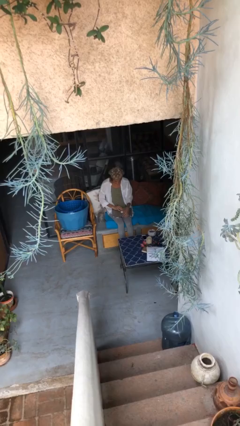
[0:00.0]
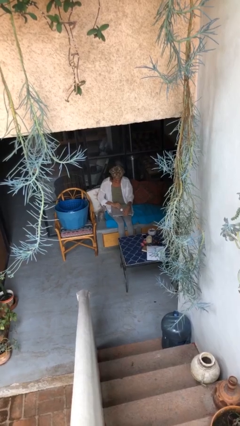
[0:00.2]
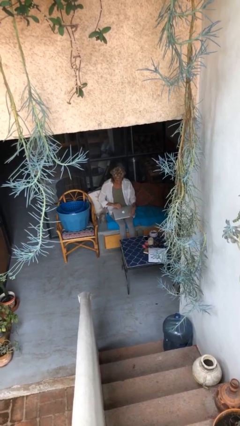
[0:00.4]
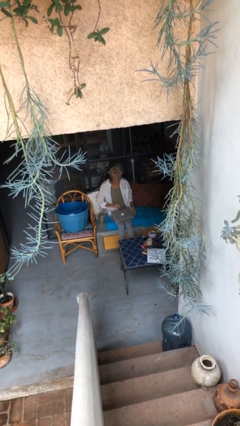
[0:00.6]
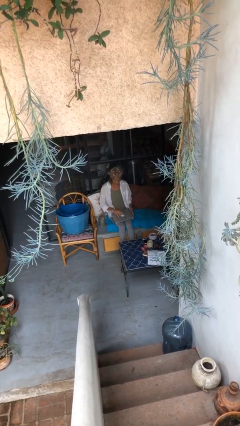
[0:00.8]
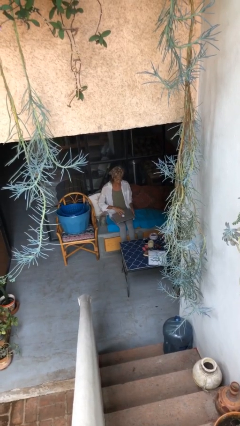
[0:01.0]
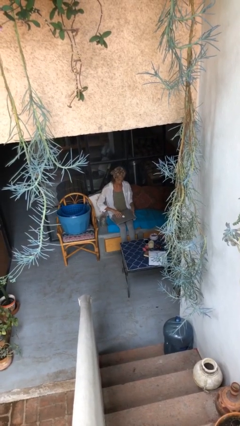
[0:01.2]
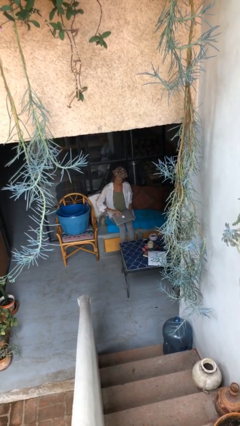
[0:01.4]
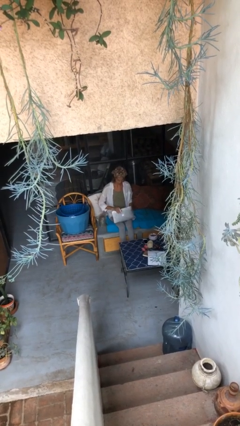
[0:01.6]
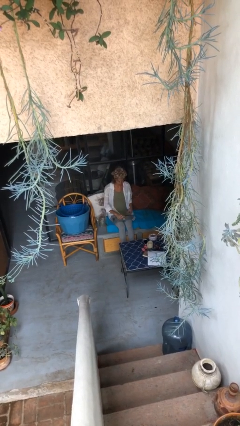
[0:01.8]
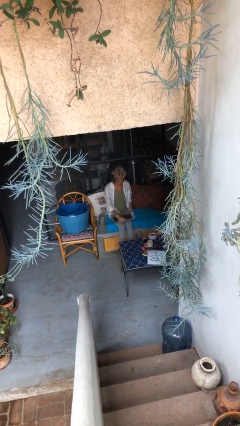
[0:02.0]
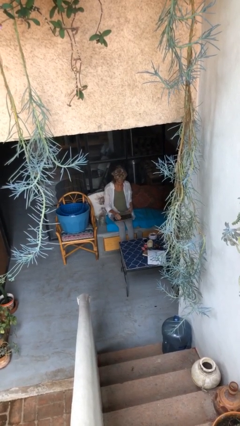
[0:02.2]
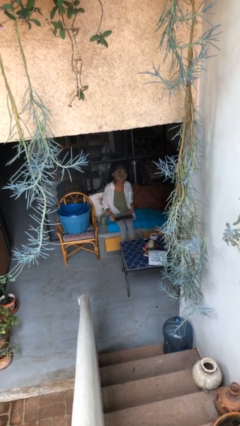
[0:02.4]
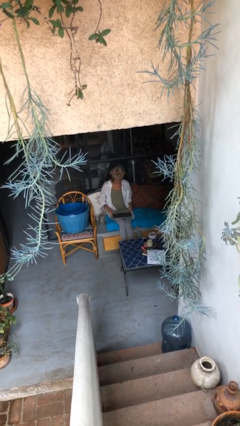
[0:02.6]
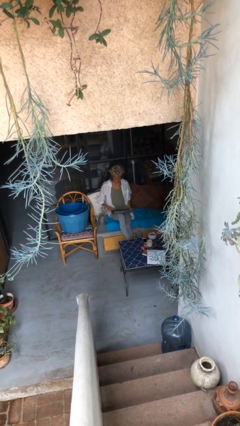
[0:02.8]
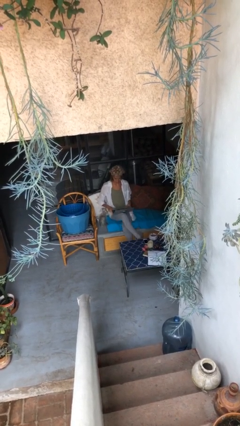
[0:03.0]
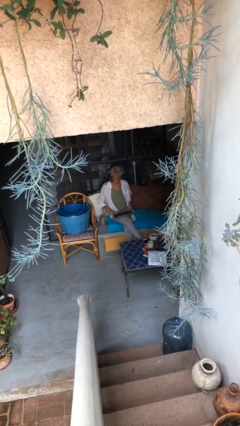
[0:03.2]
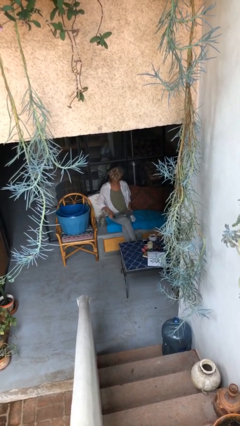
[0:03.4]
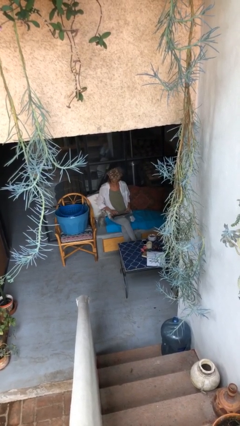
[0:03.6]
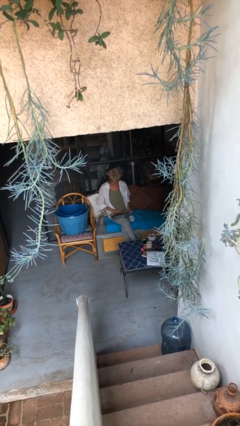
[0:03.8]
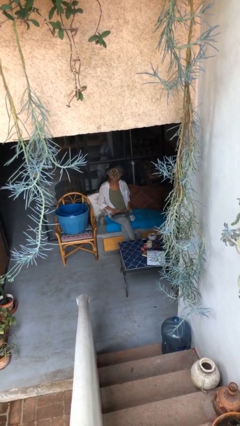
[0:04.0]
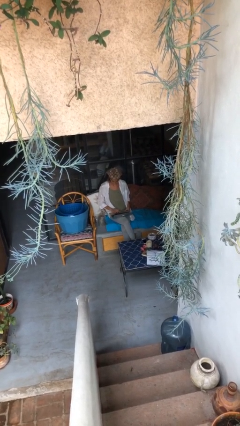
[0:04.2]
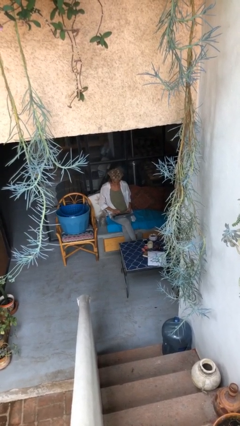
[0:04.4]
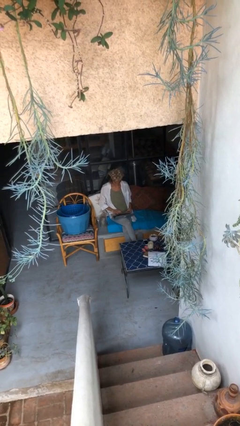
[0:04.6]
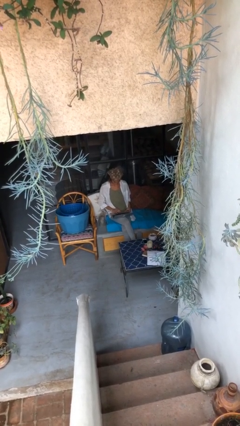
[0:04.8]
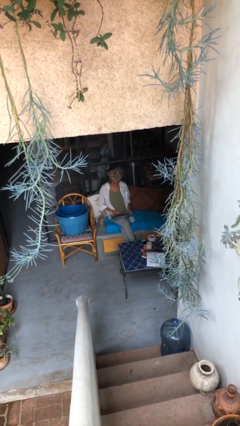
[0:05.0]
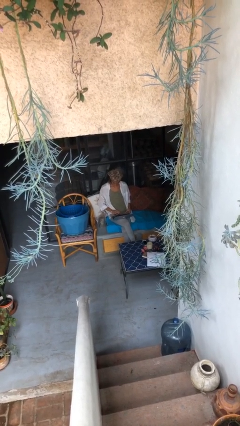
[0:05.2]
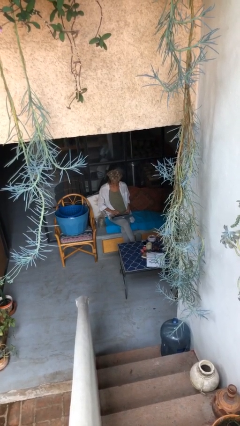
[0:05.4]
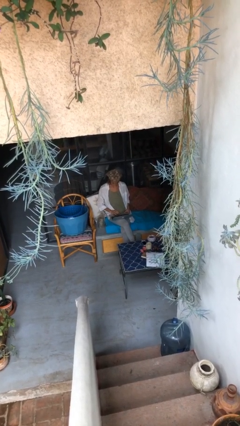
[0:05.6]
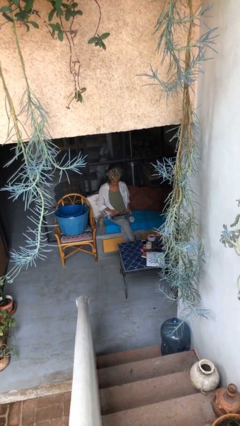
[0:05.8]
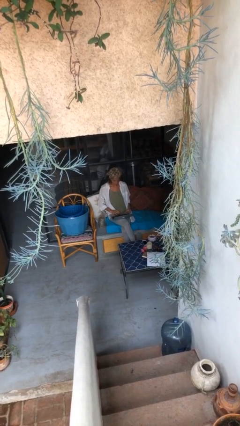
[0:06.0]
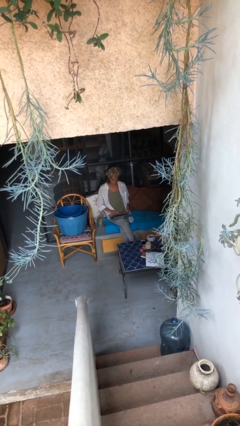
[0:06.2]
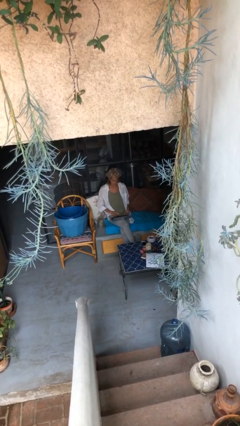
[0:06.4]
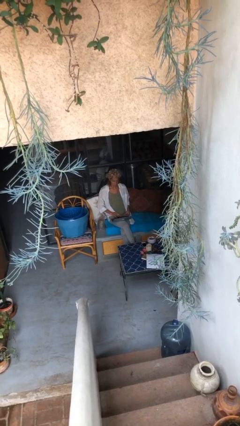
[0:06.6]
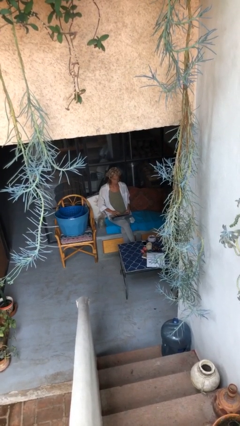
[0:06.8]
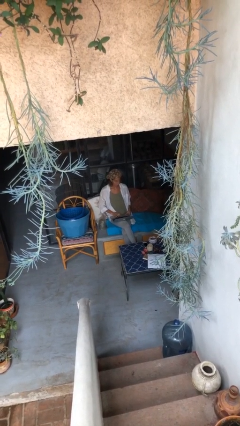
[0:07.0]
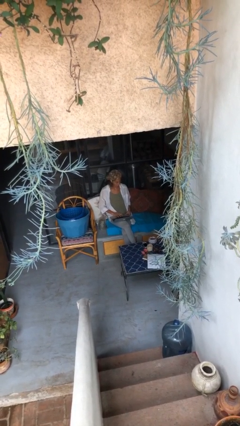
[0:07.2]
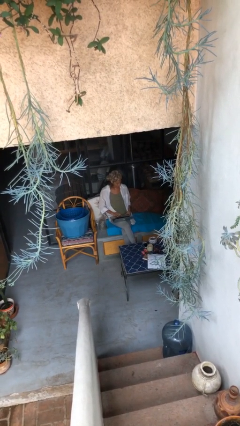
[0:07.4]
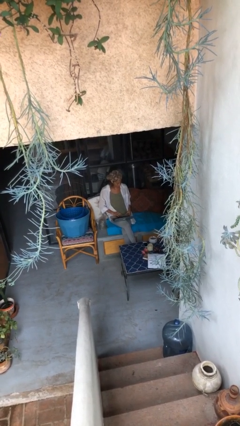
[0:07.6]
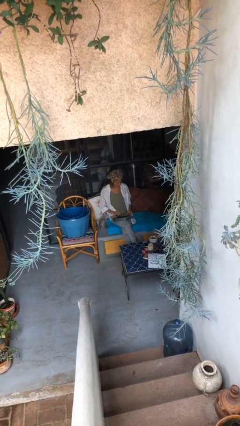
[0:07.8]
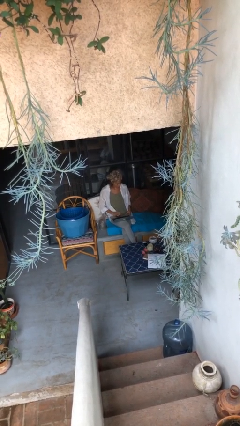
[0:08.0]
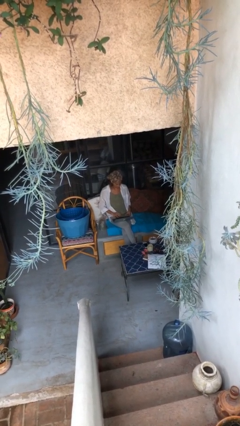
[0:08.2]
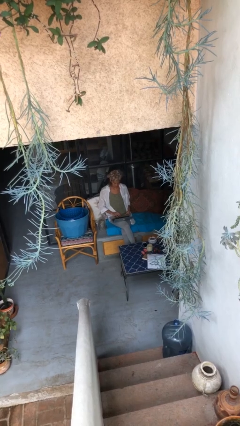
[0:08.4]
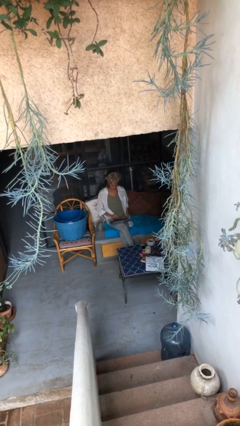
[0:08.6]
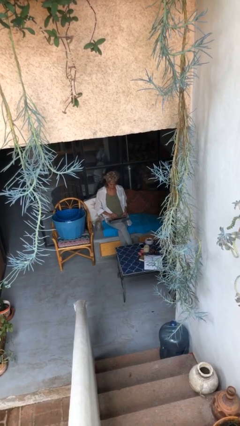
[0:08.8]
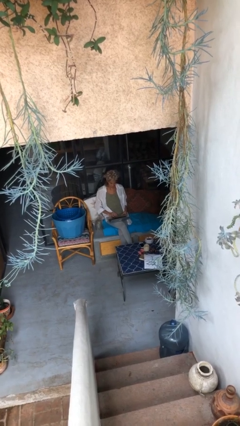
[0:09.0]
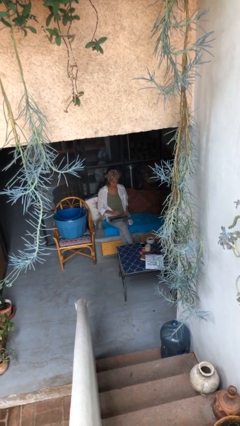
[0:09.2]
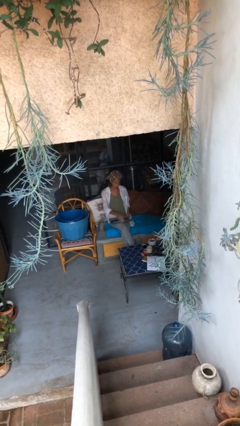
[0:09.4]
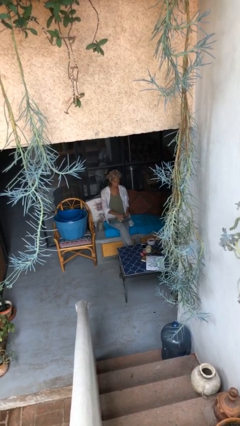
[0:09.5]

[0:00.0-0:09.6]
person interacts with laptop

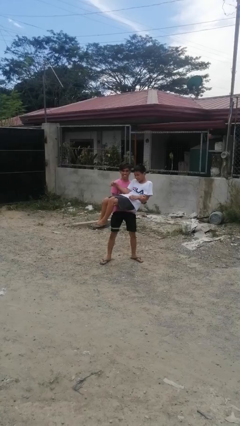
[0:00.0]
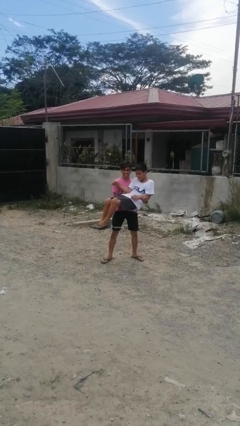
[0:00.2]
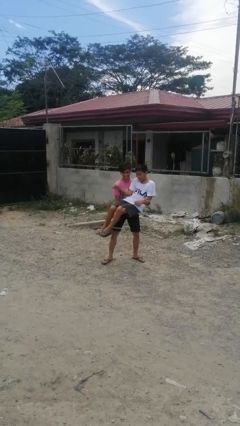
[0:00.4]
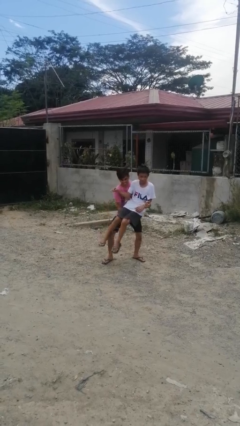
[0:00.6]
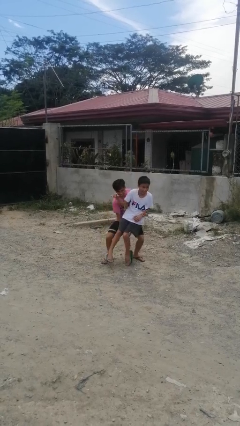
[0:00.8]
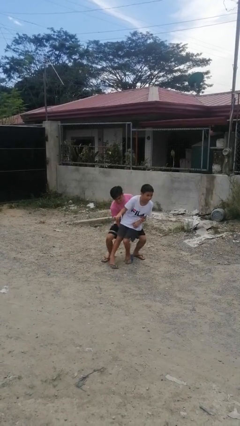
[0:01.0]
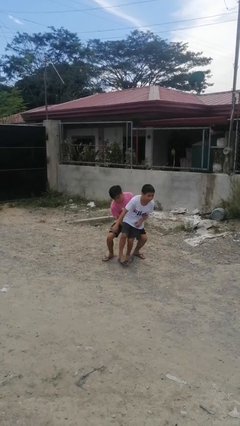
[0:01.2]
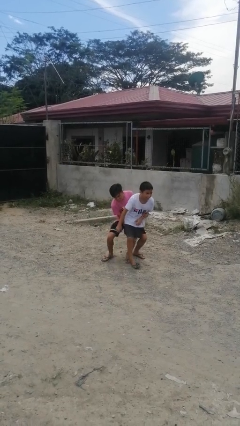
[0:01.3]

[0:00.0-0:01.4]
person puts down person

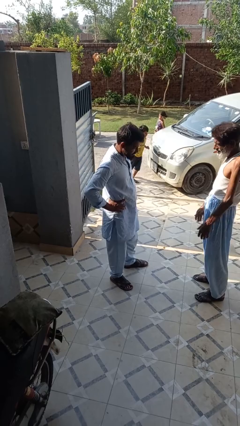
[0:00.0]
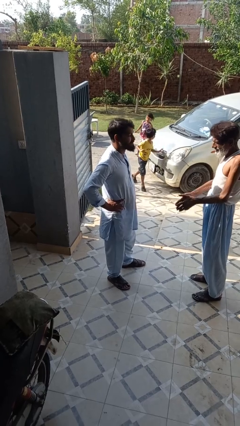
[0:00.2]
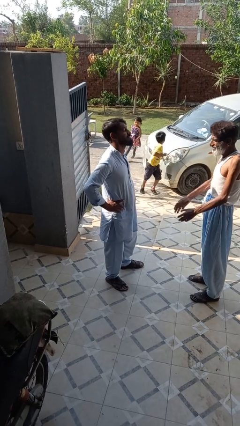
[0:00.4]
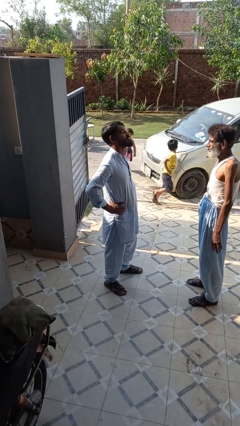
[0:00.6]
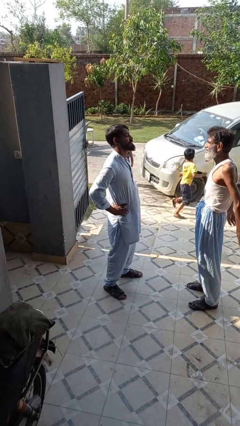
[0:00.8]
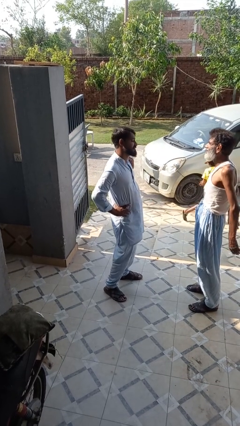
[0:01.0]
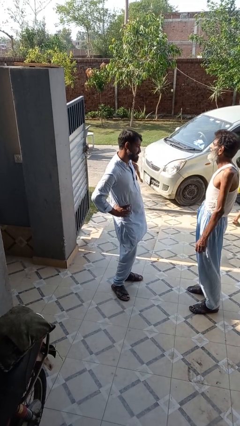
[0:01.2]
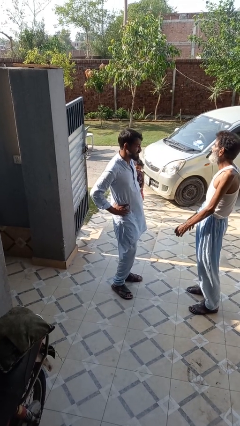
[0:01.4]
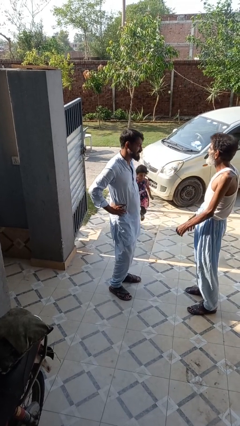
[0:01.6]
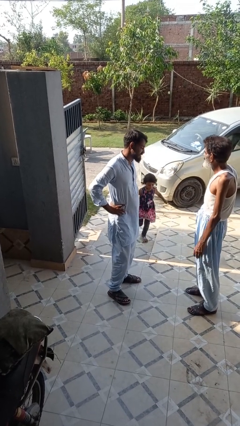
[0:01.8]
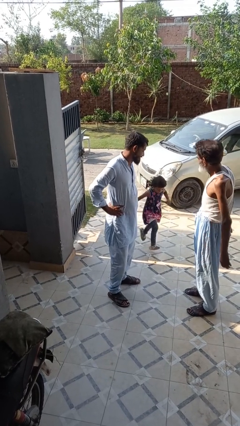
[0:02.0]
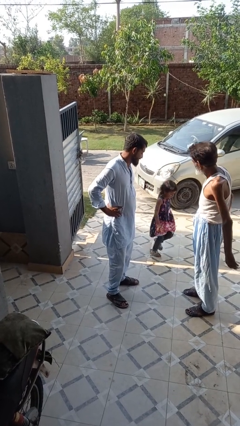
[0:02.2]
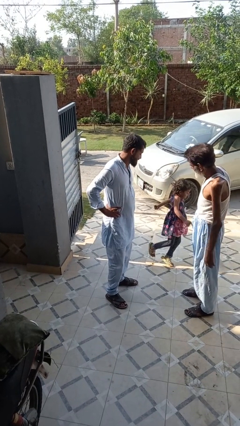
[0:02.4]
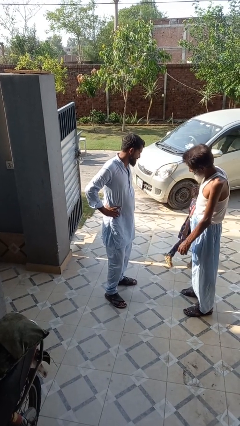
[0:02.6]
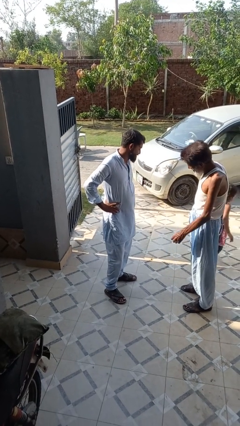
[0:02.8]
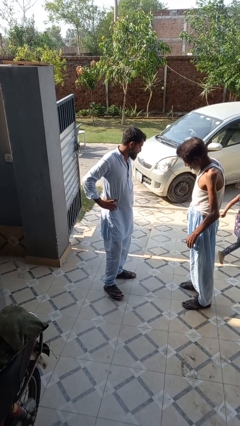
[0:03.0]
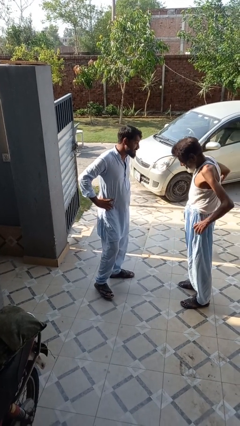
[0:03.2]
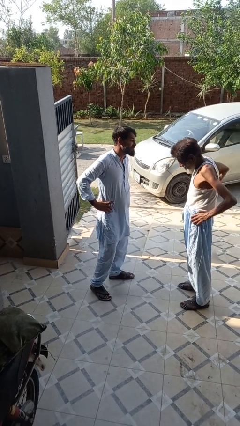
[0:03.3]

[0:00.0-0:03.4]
person laughs with person

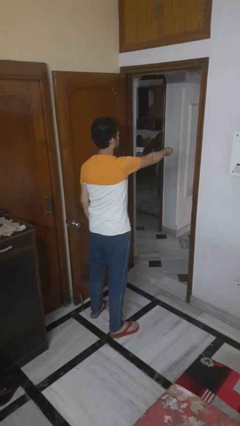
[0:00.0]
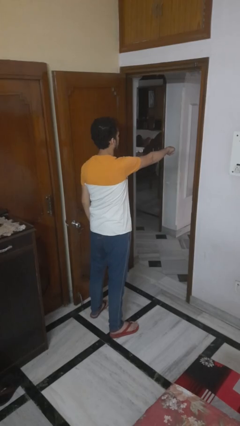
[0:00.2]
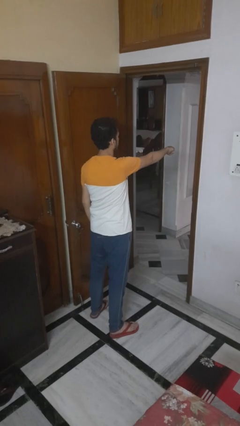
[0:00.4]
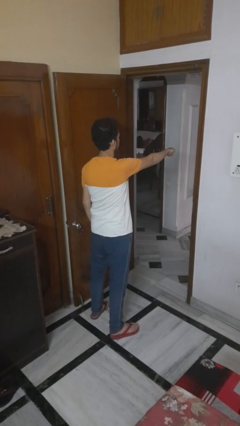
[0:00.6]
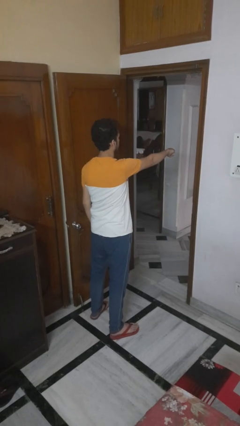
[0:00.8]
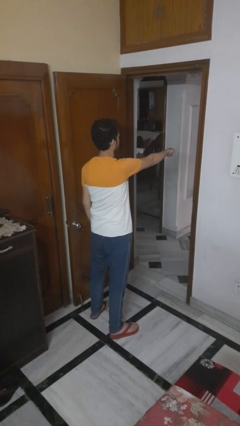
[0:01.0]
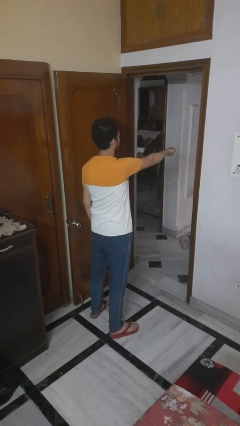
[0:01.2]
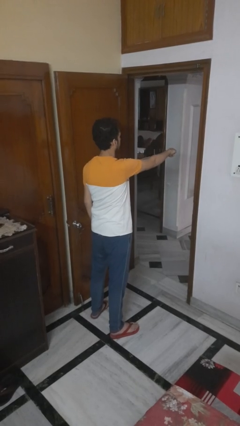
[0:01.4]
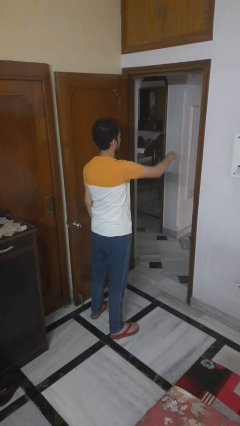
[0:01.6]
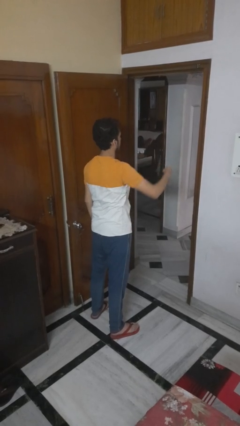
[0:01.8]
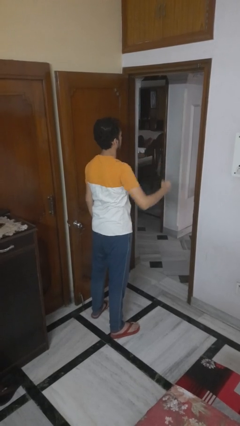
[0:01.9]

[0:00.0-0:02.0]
person punches

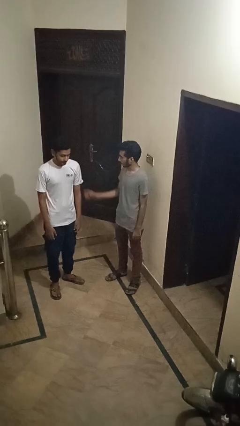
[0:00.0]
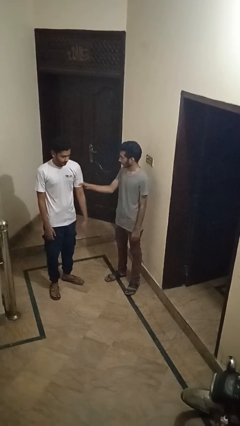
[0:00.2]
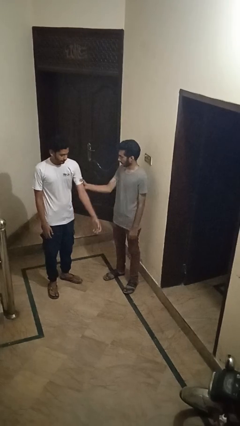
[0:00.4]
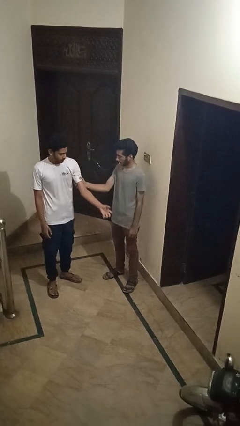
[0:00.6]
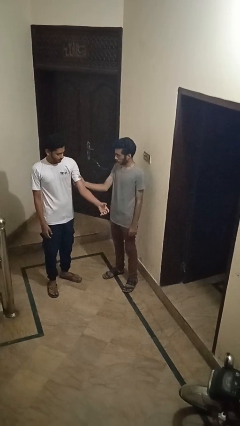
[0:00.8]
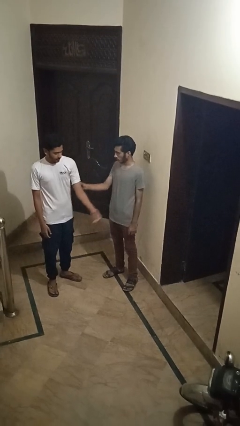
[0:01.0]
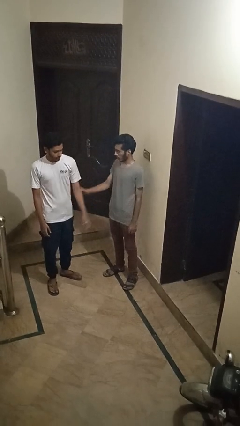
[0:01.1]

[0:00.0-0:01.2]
person grabs person by bicep

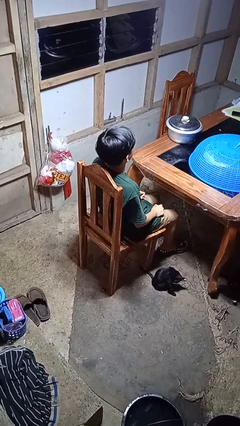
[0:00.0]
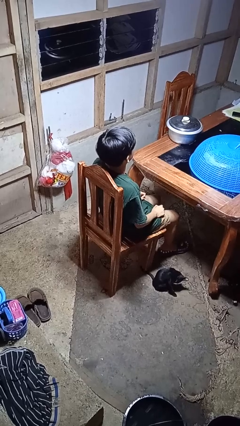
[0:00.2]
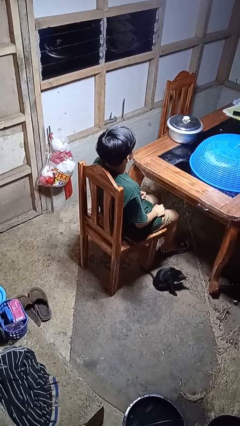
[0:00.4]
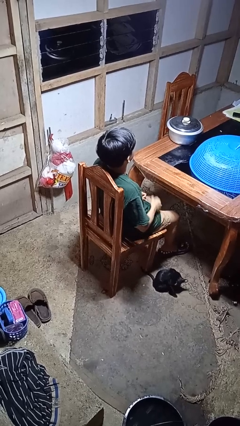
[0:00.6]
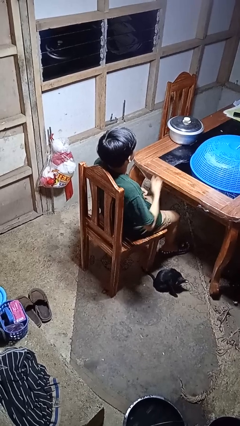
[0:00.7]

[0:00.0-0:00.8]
person drums on chest
